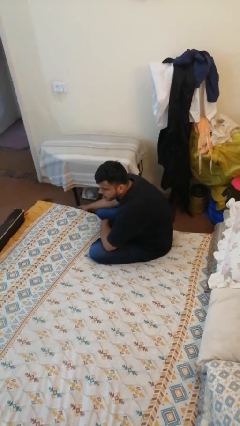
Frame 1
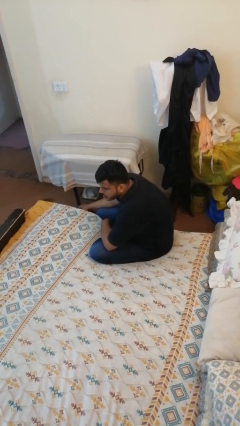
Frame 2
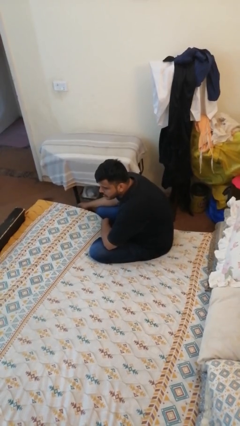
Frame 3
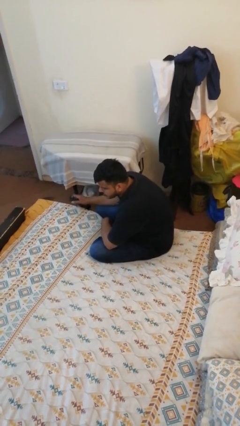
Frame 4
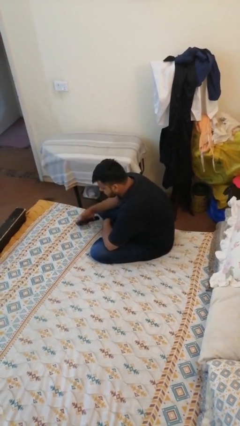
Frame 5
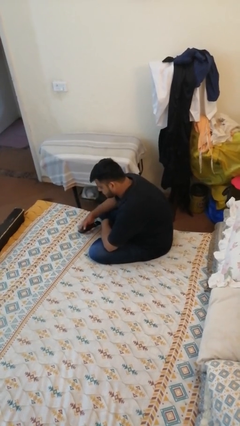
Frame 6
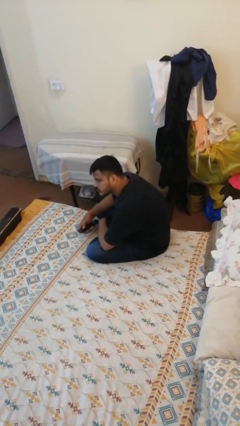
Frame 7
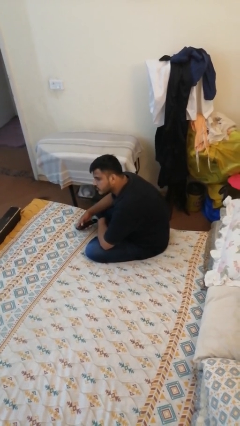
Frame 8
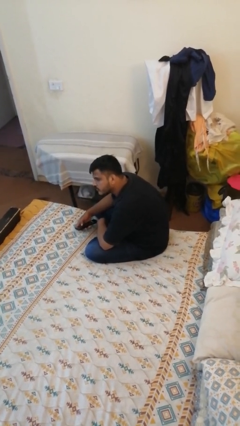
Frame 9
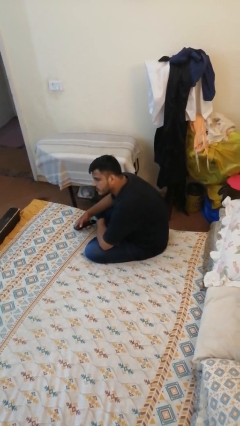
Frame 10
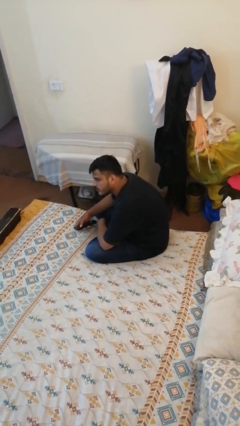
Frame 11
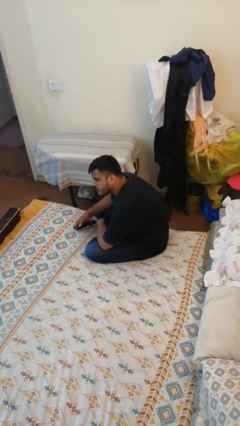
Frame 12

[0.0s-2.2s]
person uses television remote

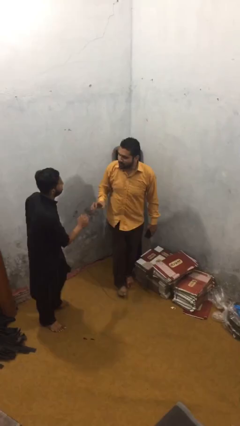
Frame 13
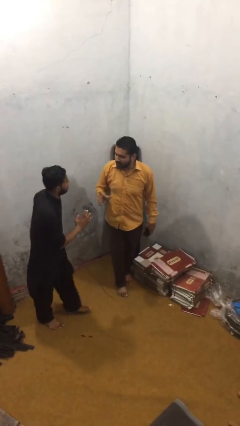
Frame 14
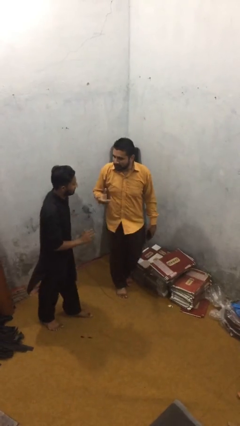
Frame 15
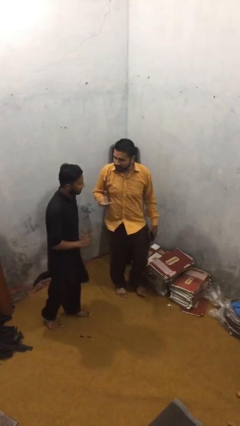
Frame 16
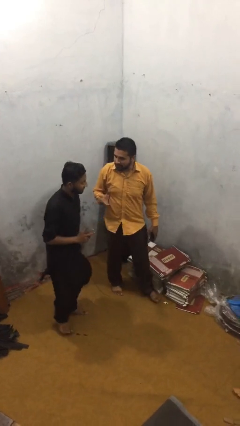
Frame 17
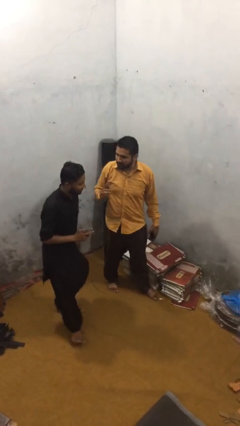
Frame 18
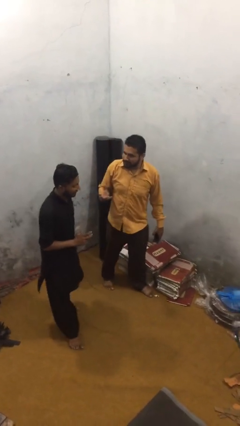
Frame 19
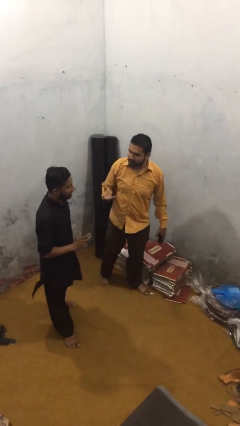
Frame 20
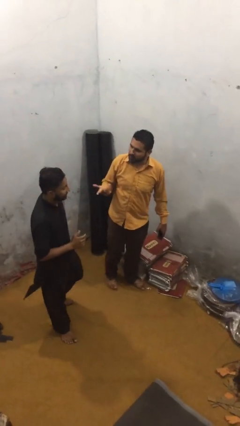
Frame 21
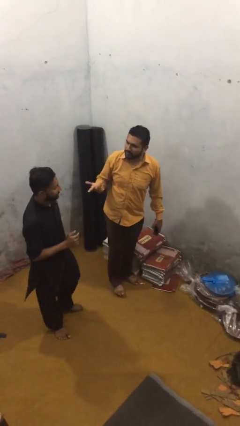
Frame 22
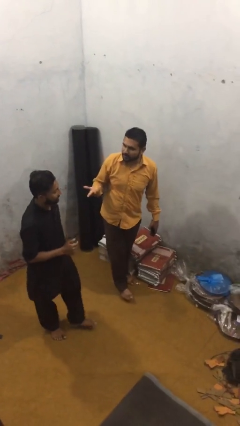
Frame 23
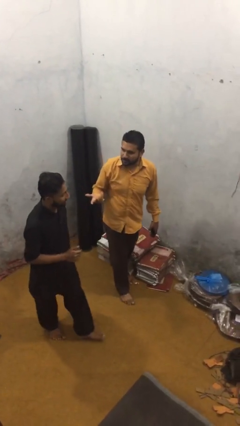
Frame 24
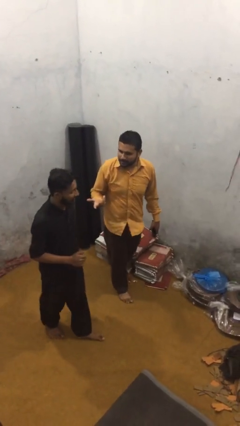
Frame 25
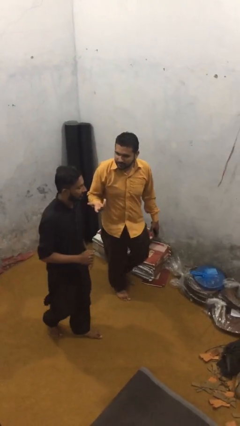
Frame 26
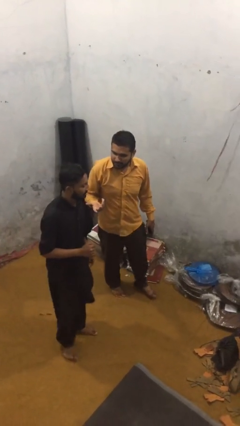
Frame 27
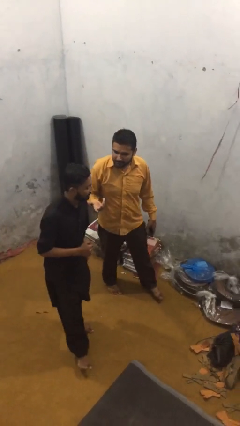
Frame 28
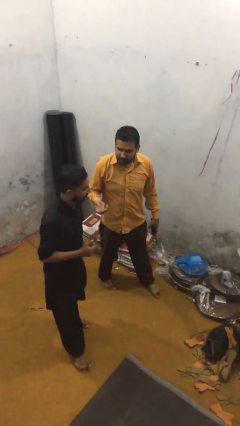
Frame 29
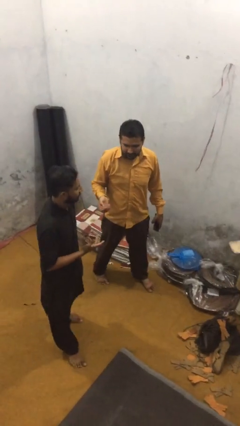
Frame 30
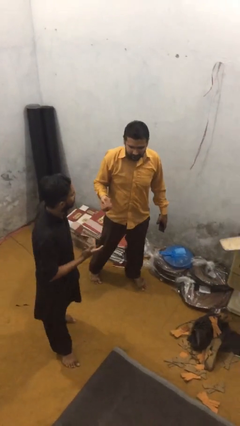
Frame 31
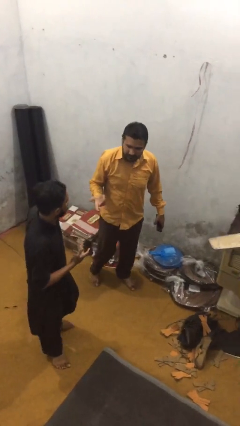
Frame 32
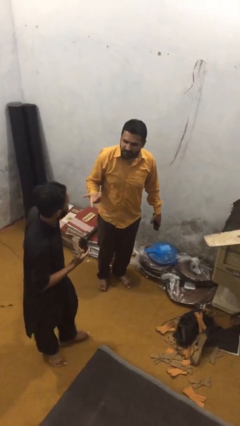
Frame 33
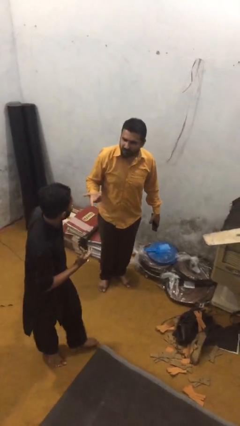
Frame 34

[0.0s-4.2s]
person talks to person

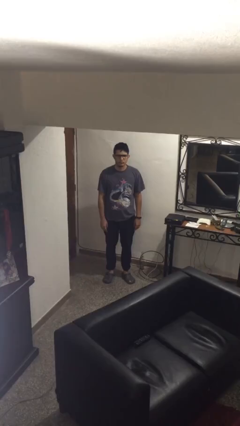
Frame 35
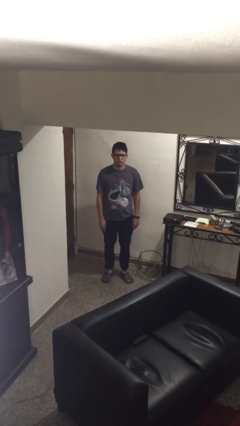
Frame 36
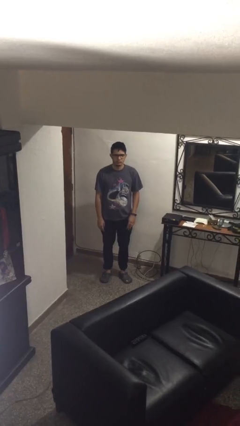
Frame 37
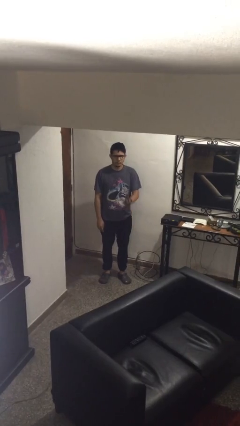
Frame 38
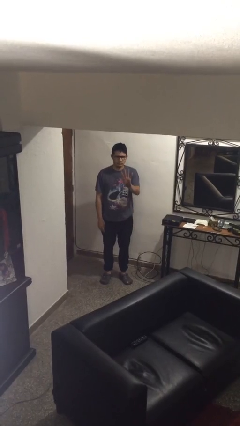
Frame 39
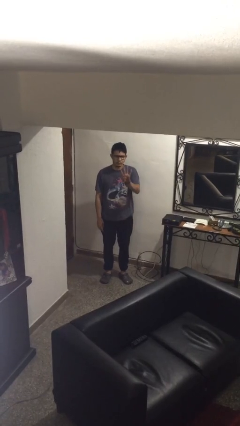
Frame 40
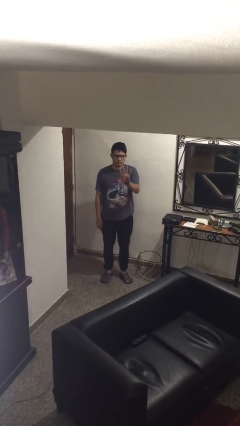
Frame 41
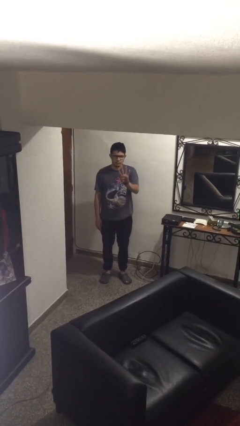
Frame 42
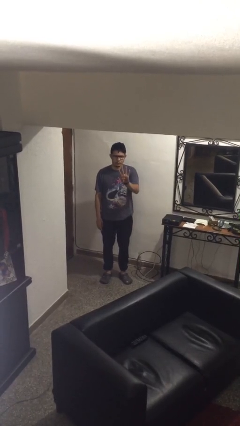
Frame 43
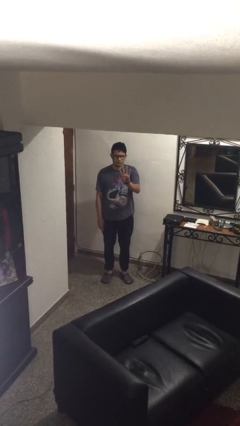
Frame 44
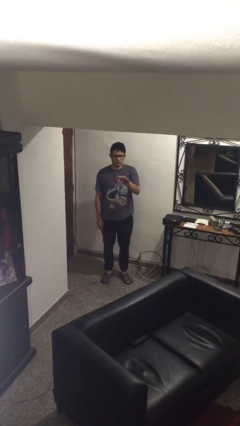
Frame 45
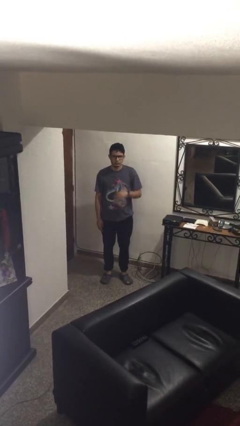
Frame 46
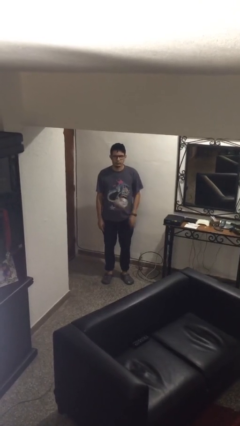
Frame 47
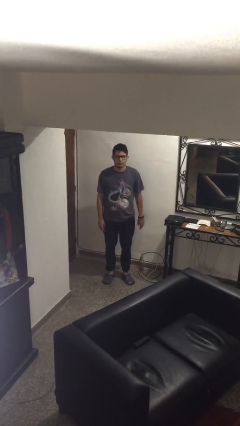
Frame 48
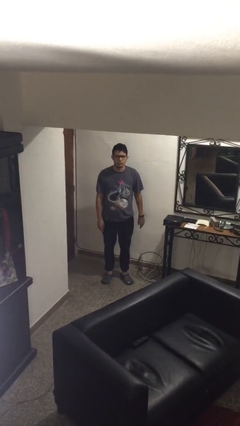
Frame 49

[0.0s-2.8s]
person gestures number four

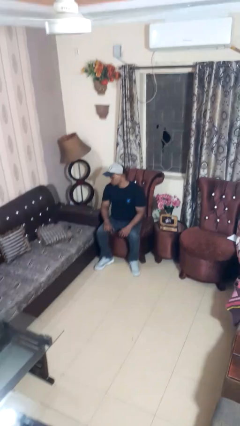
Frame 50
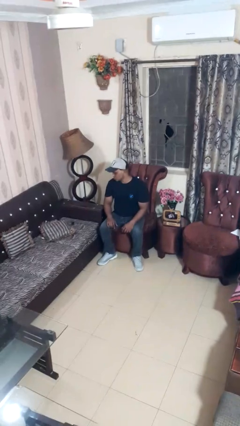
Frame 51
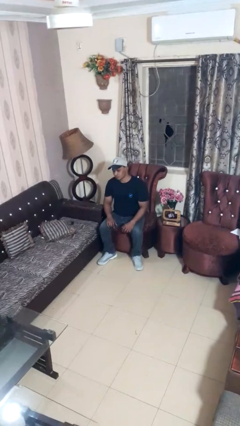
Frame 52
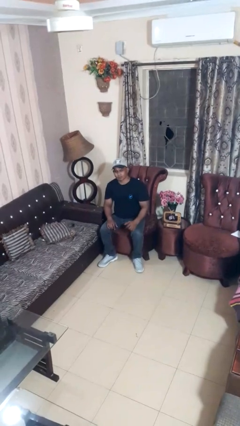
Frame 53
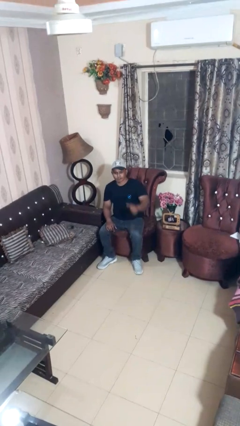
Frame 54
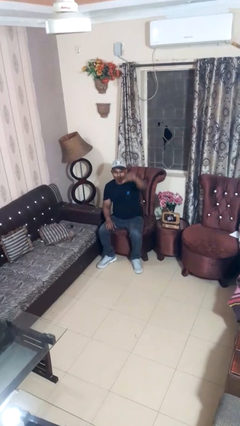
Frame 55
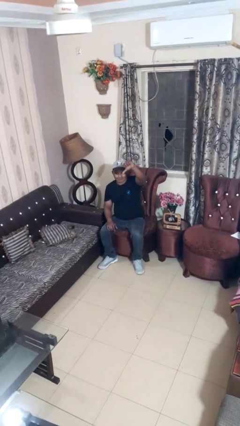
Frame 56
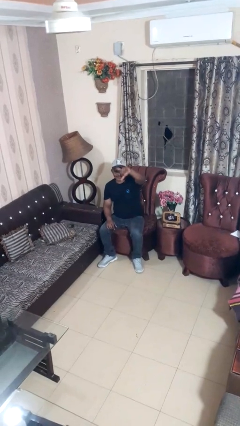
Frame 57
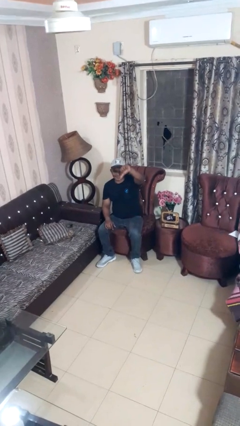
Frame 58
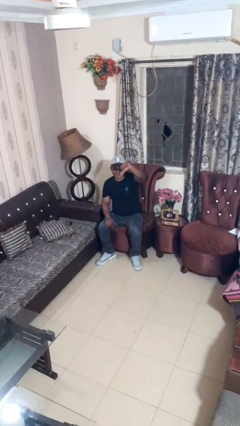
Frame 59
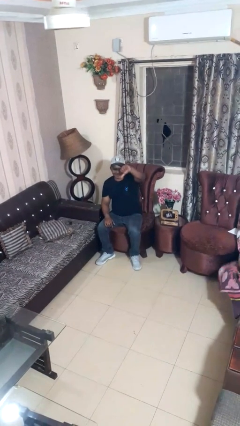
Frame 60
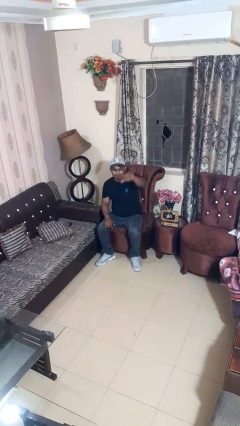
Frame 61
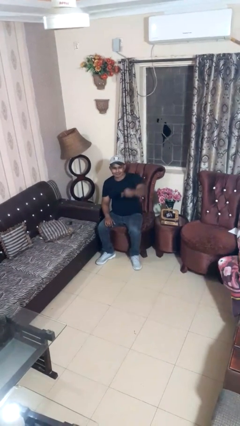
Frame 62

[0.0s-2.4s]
person gestures thumbs down

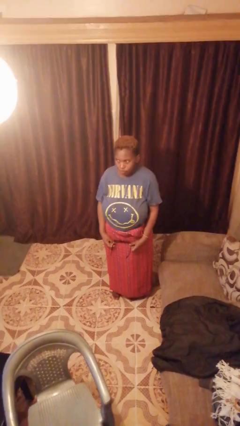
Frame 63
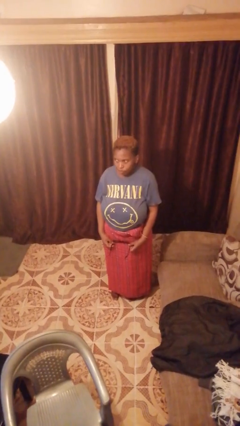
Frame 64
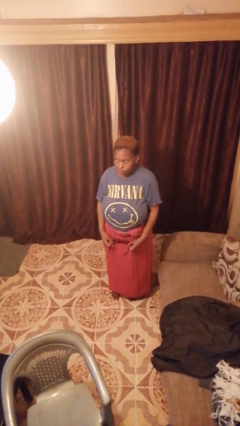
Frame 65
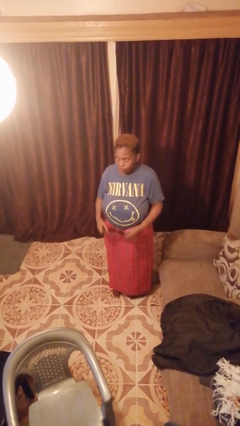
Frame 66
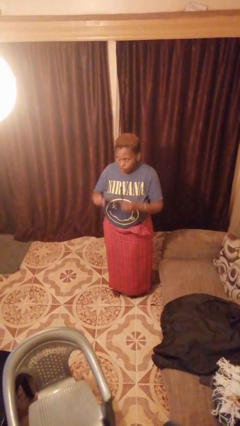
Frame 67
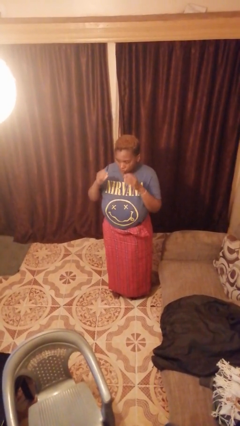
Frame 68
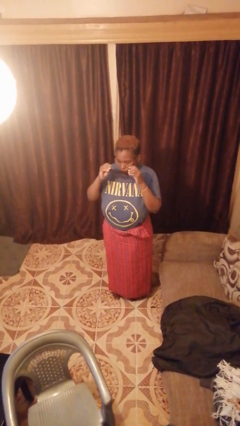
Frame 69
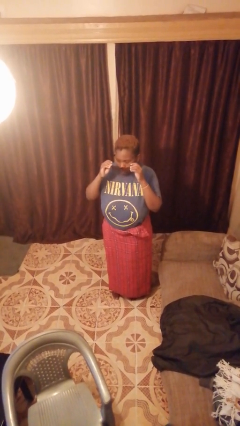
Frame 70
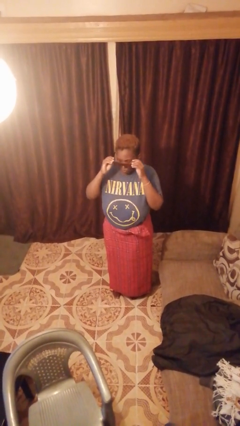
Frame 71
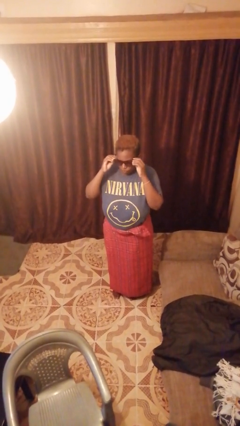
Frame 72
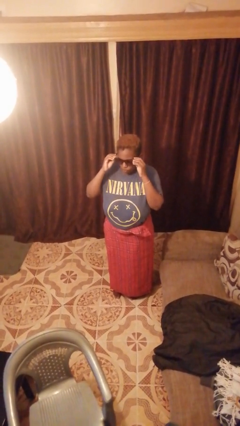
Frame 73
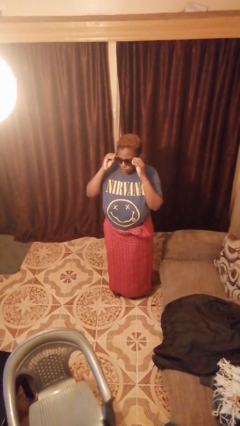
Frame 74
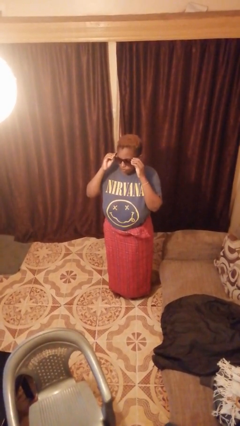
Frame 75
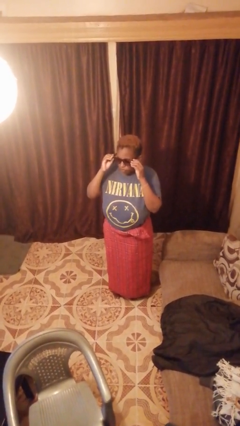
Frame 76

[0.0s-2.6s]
person puts on sunglasses

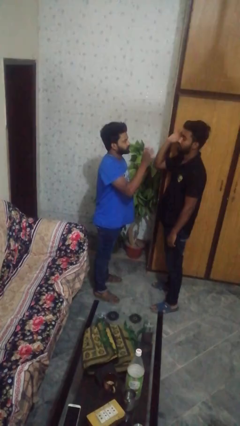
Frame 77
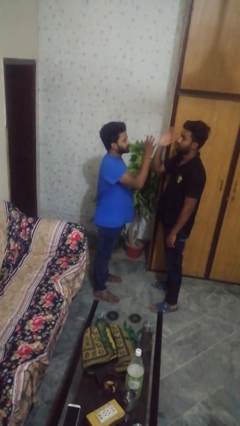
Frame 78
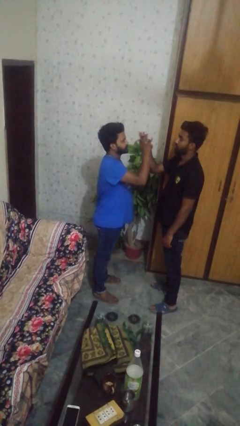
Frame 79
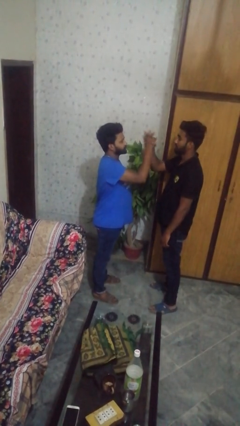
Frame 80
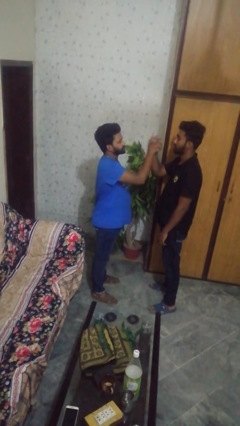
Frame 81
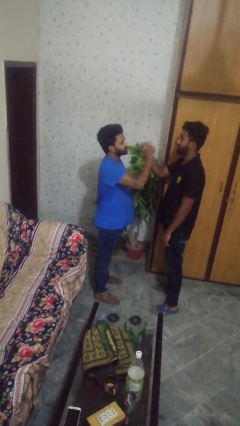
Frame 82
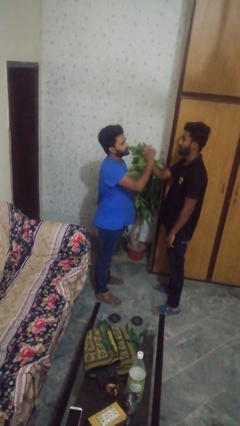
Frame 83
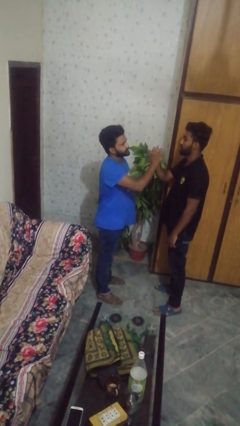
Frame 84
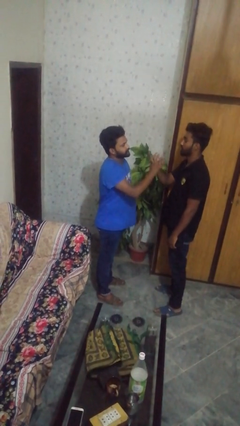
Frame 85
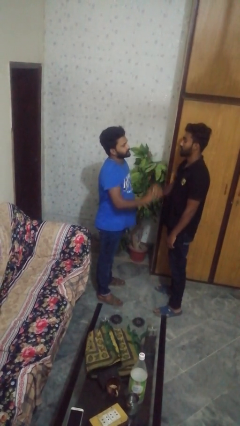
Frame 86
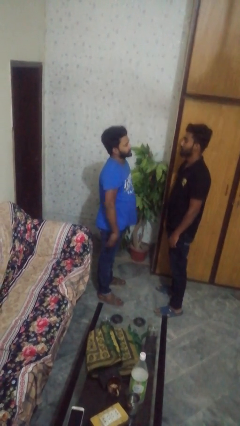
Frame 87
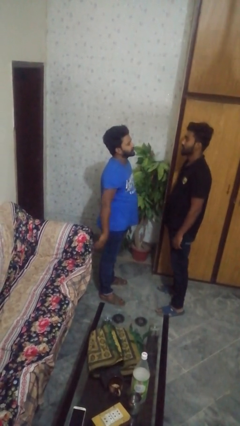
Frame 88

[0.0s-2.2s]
person highfives hand

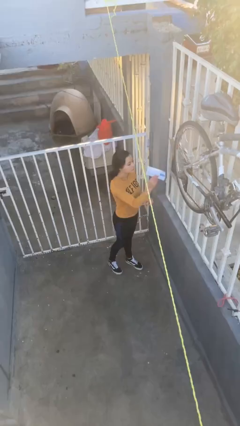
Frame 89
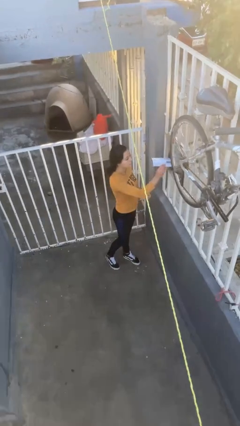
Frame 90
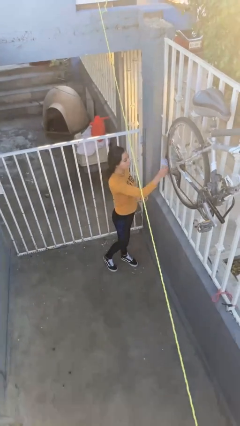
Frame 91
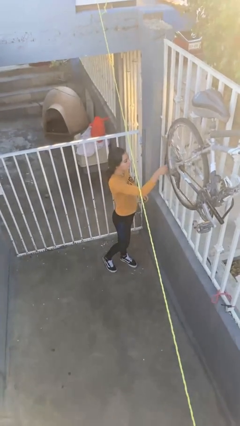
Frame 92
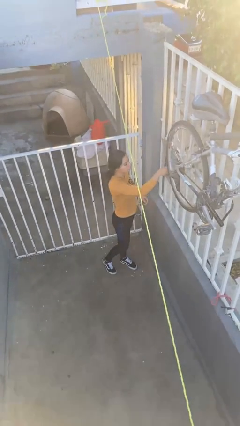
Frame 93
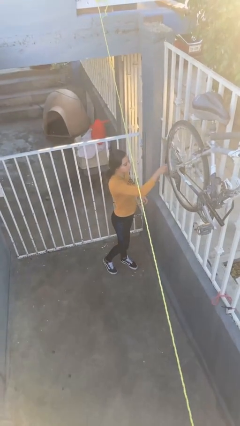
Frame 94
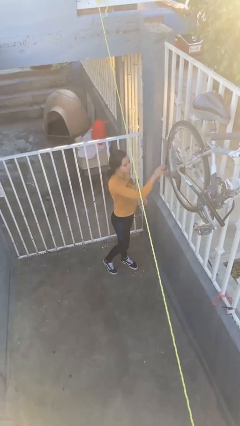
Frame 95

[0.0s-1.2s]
person puts letters in mailbox
